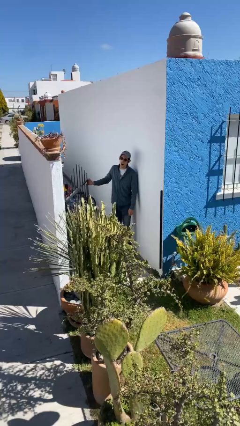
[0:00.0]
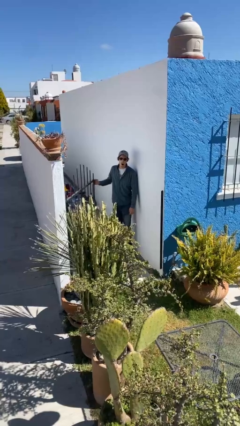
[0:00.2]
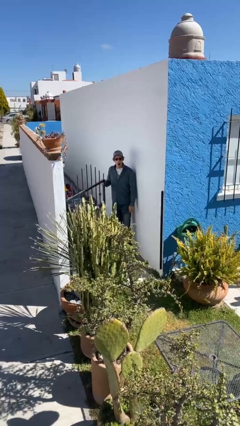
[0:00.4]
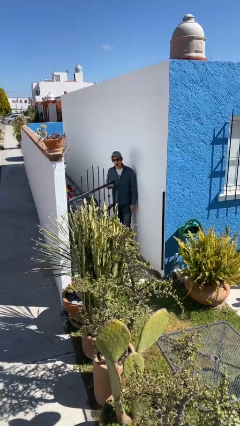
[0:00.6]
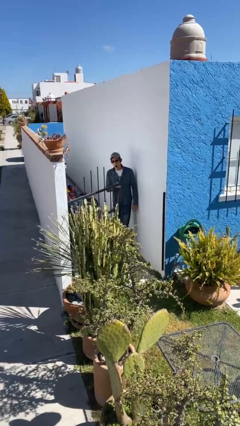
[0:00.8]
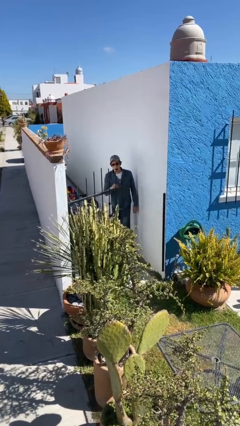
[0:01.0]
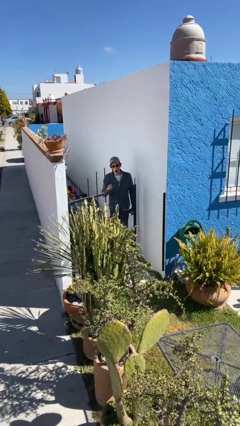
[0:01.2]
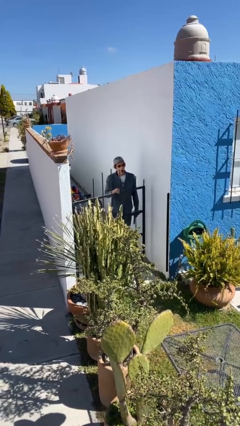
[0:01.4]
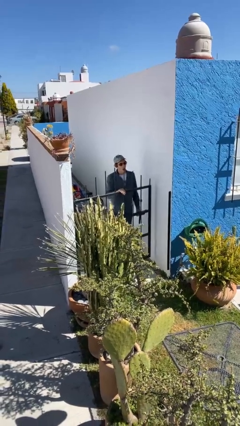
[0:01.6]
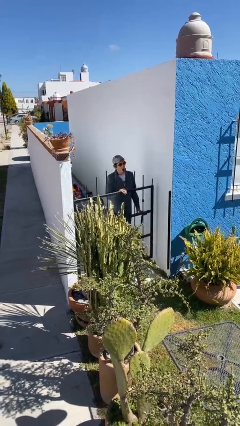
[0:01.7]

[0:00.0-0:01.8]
person closes facility door

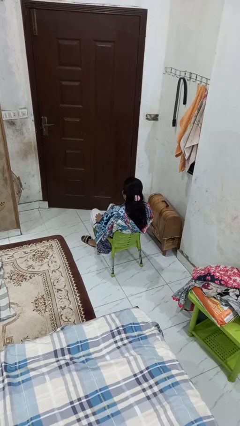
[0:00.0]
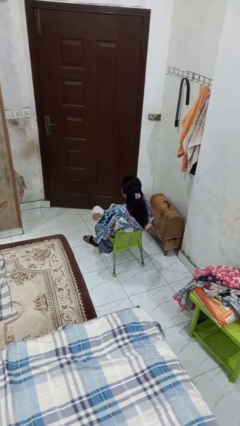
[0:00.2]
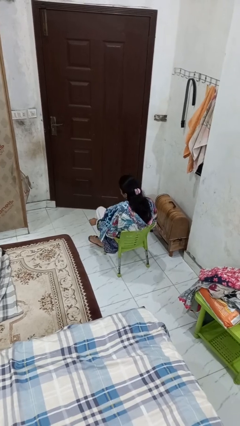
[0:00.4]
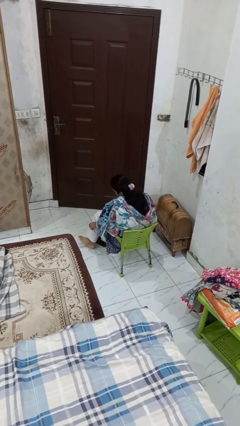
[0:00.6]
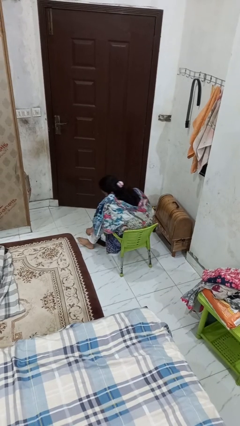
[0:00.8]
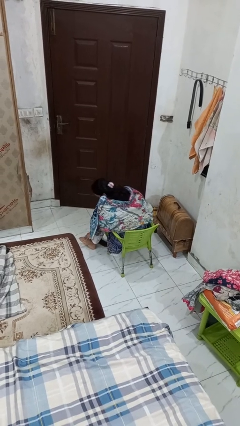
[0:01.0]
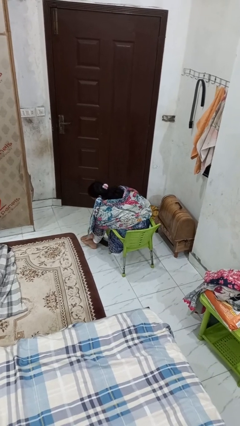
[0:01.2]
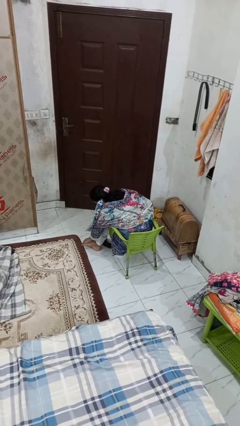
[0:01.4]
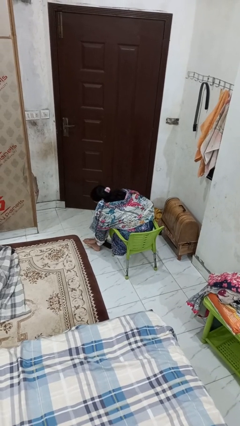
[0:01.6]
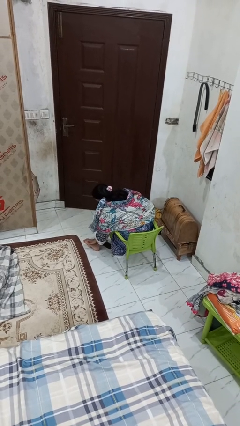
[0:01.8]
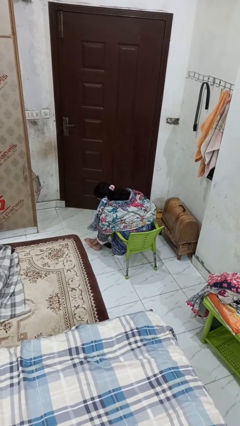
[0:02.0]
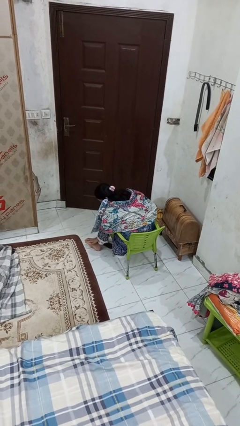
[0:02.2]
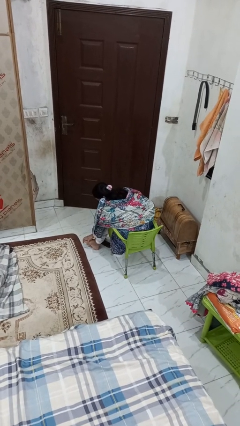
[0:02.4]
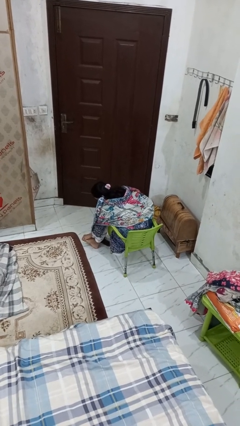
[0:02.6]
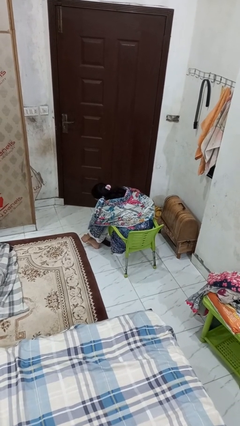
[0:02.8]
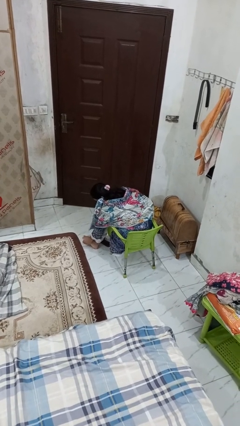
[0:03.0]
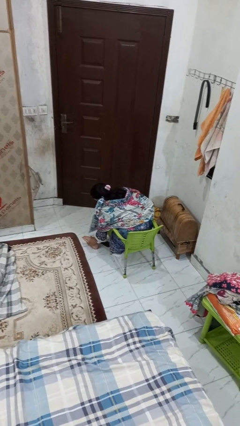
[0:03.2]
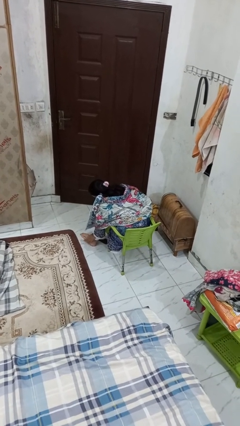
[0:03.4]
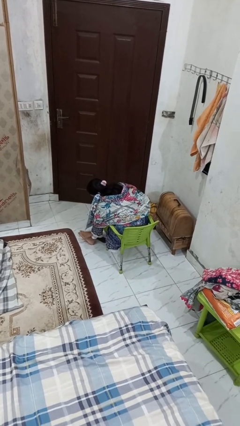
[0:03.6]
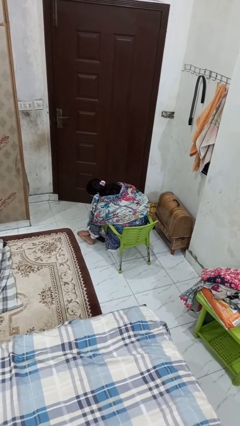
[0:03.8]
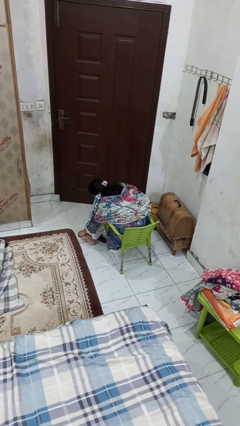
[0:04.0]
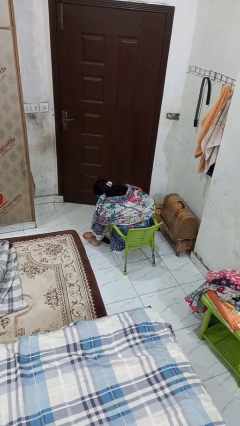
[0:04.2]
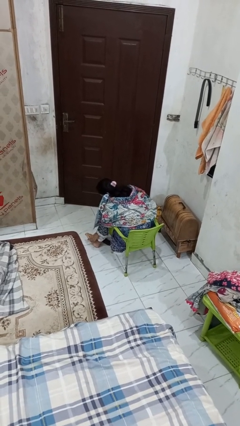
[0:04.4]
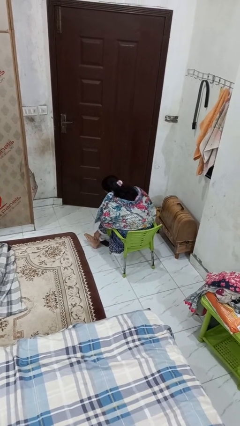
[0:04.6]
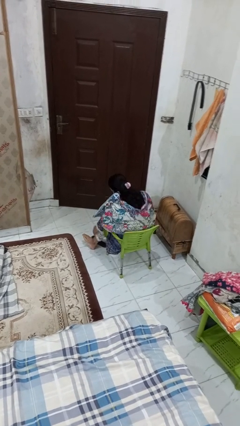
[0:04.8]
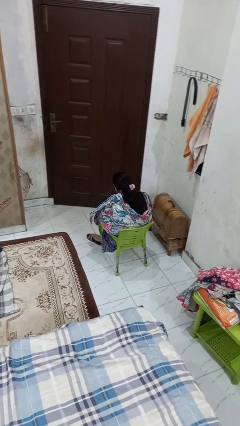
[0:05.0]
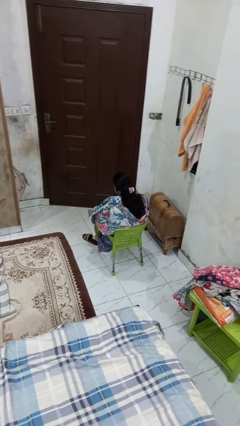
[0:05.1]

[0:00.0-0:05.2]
person rubs foot

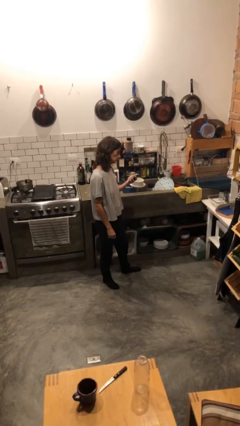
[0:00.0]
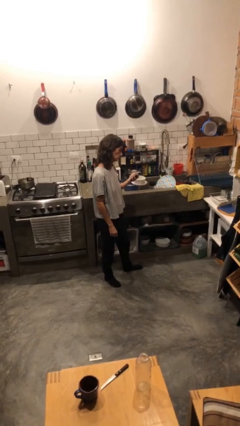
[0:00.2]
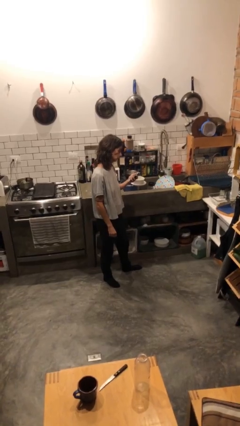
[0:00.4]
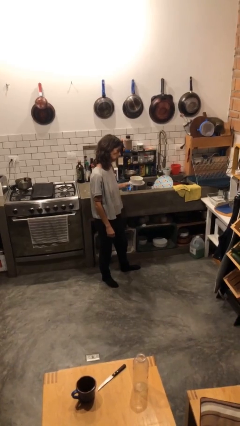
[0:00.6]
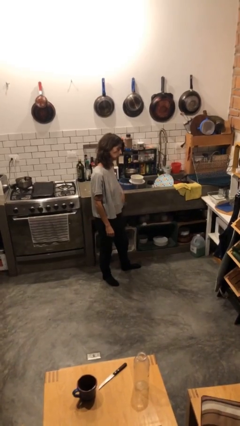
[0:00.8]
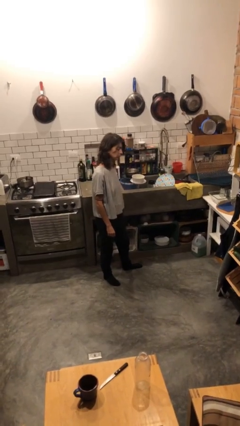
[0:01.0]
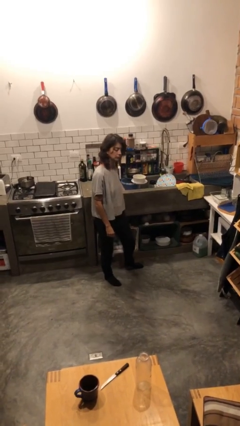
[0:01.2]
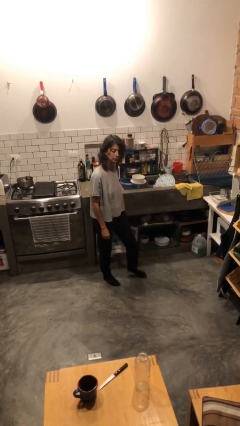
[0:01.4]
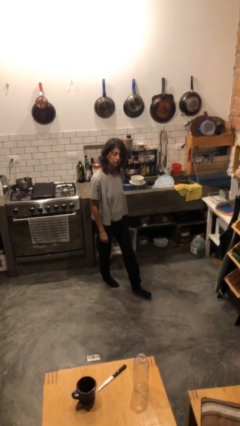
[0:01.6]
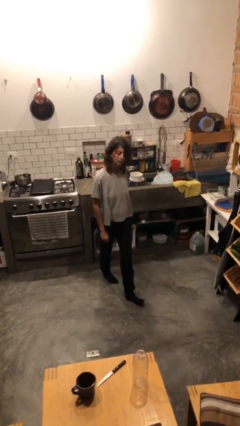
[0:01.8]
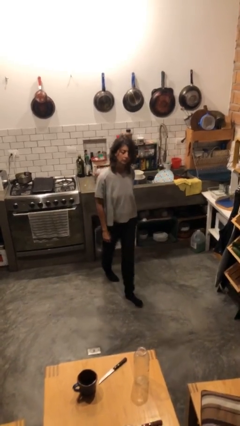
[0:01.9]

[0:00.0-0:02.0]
person puts phone into pocket

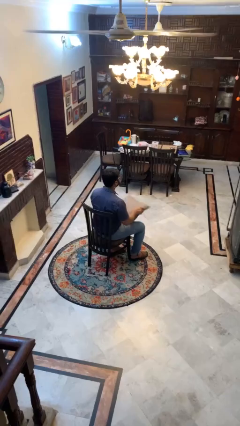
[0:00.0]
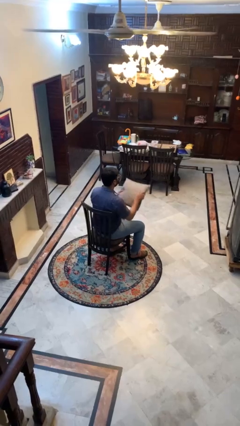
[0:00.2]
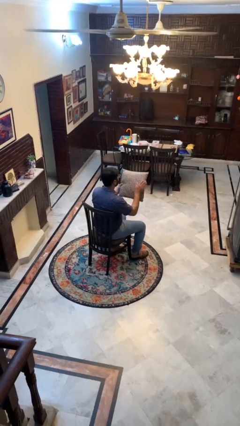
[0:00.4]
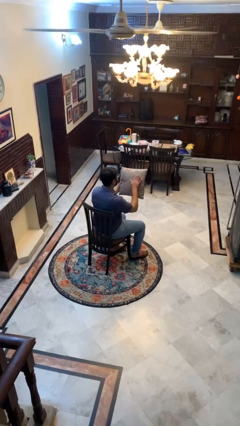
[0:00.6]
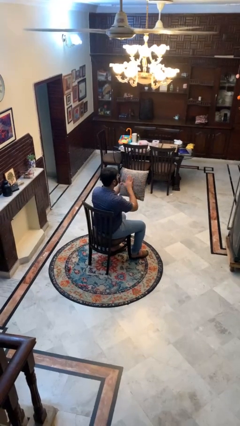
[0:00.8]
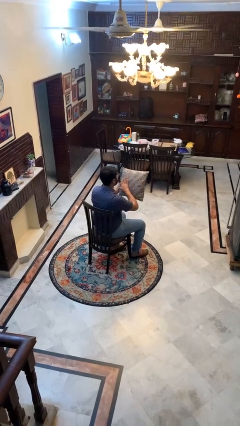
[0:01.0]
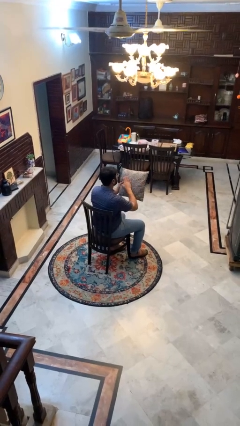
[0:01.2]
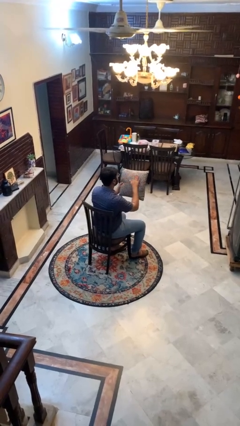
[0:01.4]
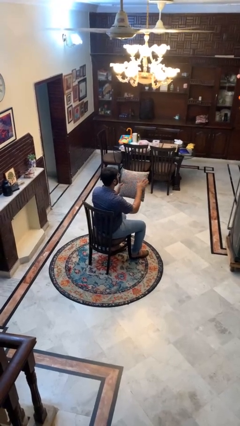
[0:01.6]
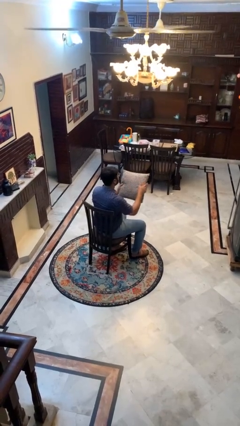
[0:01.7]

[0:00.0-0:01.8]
person waves hand over object

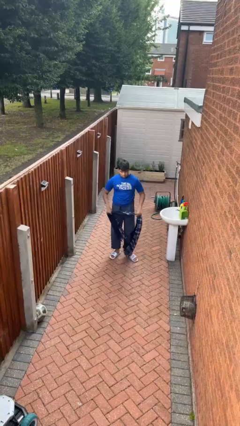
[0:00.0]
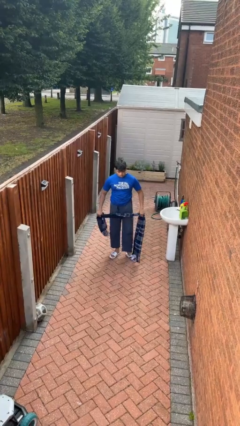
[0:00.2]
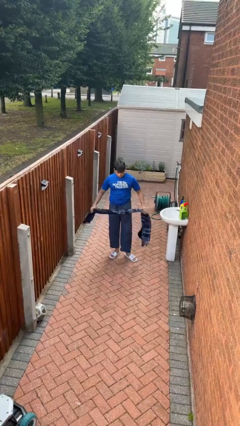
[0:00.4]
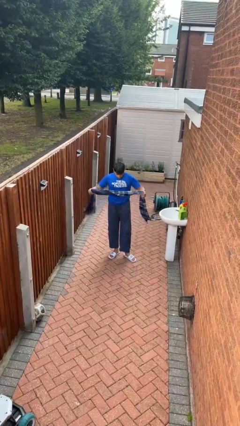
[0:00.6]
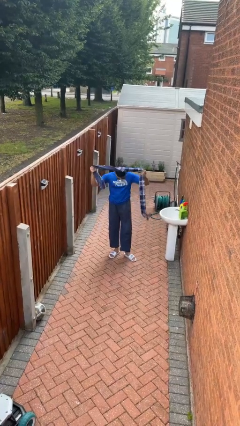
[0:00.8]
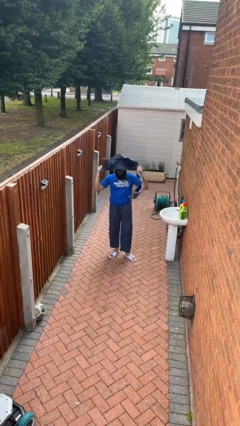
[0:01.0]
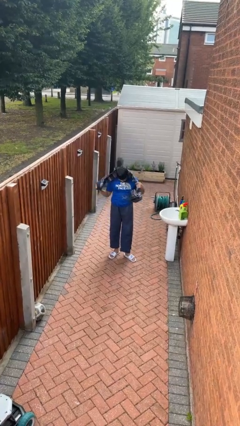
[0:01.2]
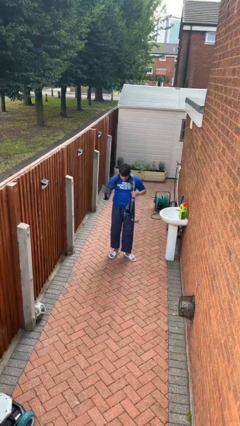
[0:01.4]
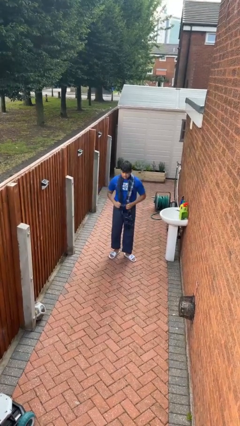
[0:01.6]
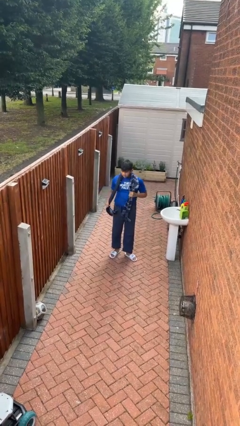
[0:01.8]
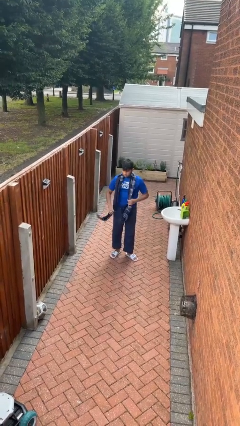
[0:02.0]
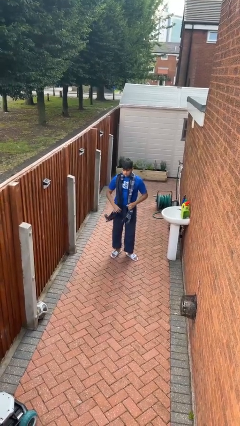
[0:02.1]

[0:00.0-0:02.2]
person puts on scarf

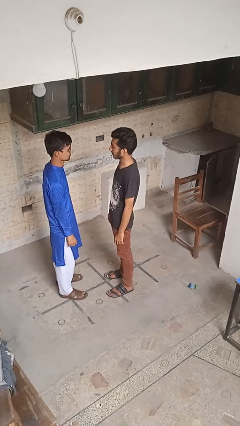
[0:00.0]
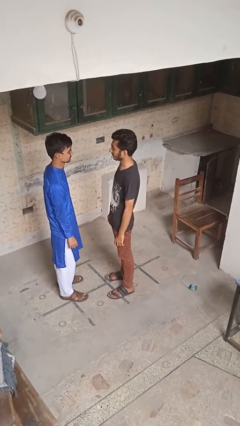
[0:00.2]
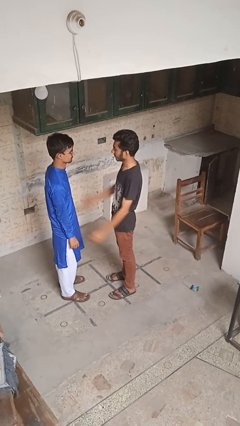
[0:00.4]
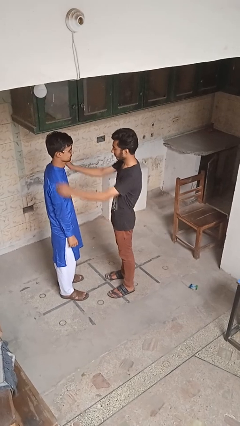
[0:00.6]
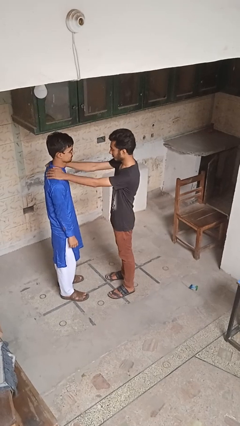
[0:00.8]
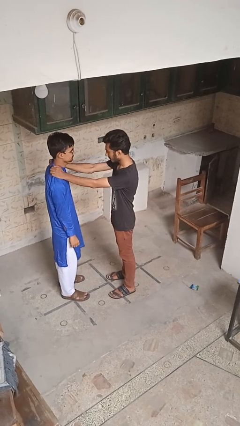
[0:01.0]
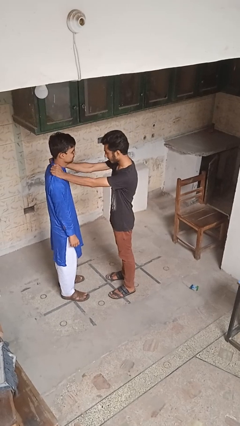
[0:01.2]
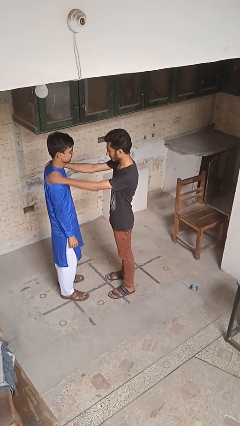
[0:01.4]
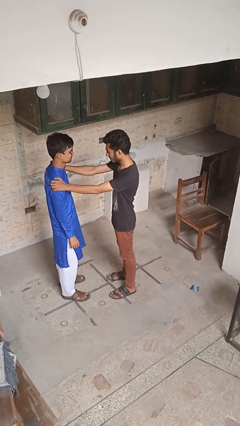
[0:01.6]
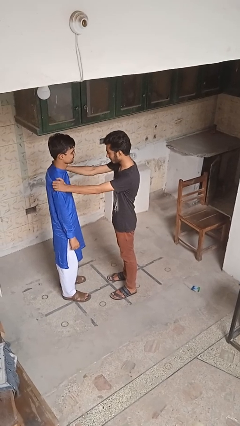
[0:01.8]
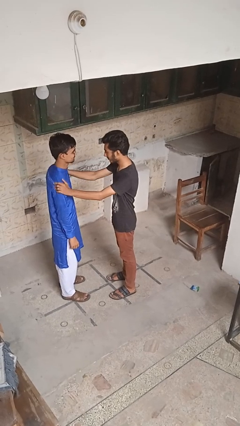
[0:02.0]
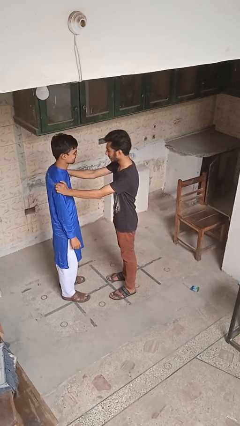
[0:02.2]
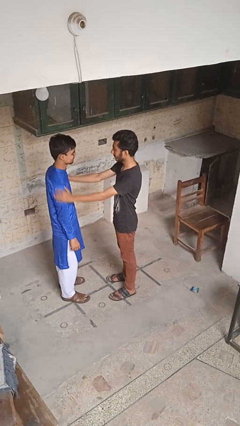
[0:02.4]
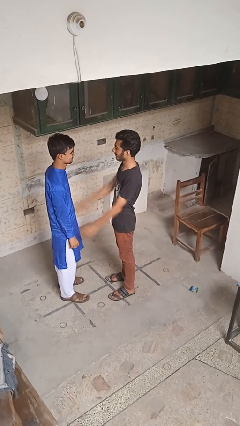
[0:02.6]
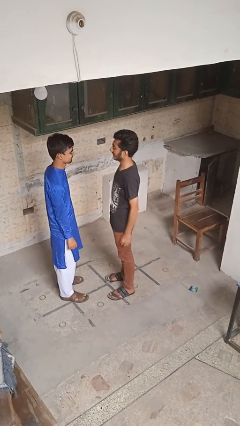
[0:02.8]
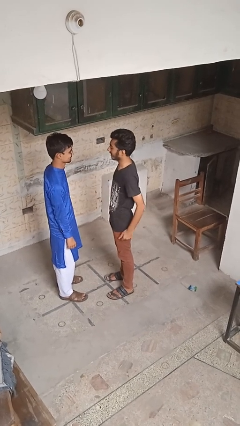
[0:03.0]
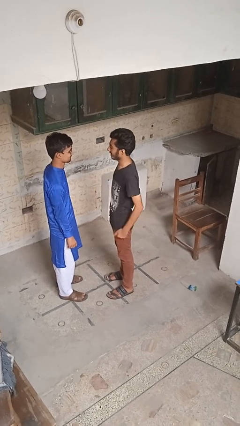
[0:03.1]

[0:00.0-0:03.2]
person pounds shoulders of person

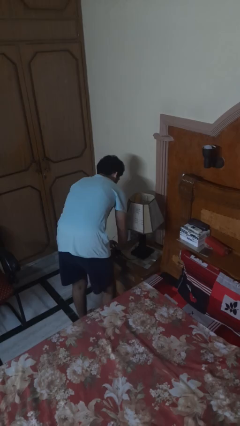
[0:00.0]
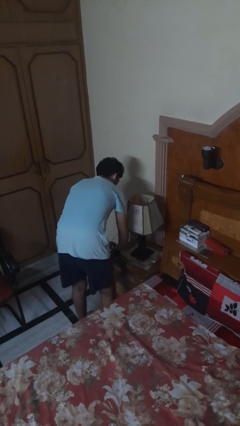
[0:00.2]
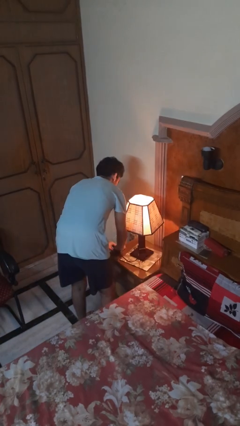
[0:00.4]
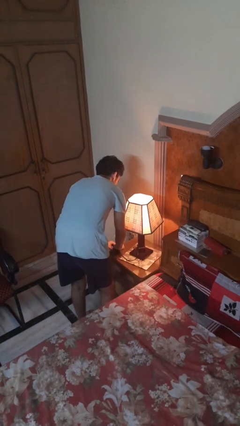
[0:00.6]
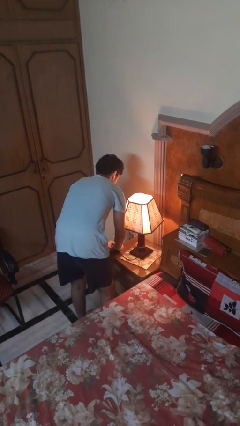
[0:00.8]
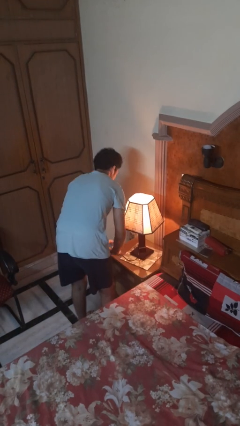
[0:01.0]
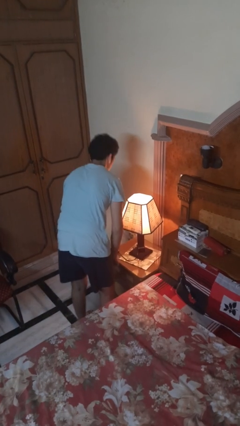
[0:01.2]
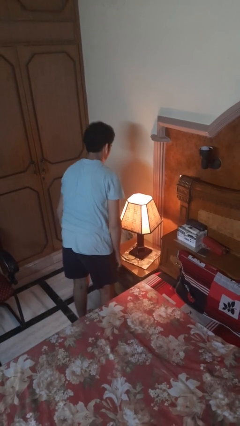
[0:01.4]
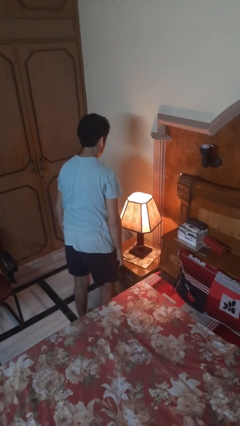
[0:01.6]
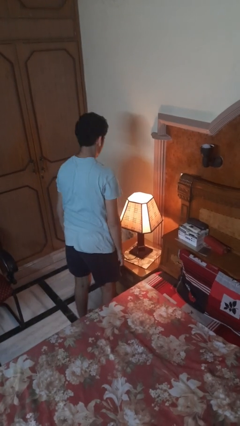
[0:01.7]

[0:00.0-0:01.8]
person turns on lamp
